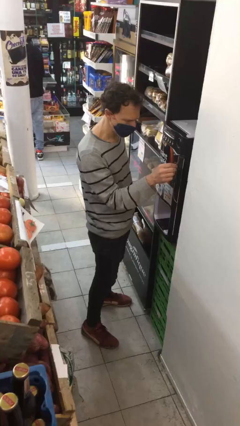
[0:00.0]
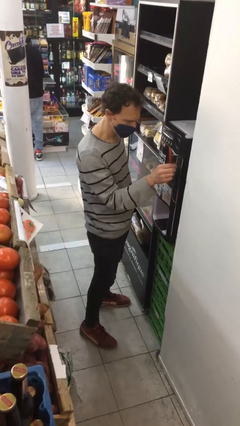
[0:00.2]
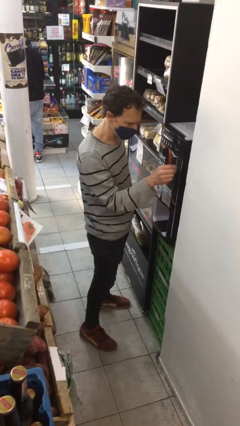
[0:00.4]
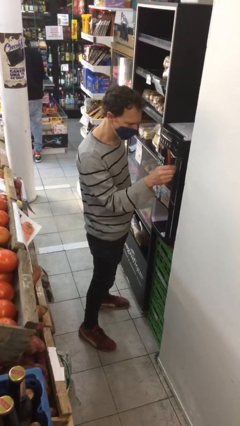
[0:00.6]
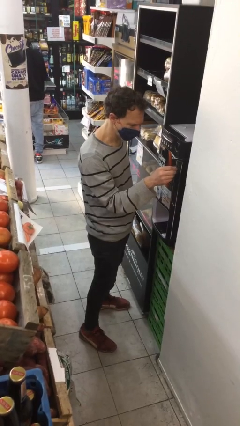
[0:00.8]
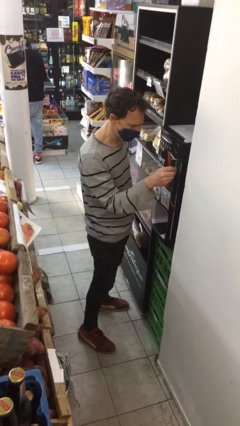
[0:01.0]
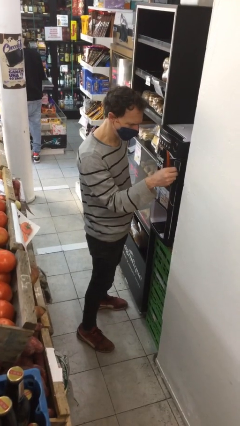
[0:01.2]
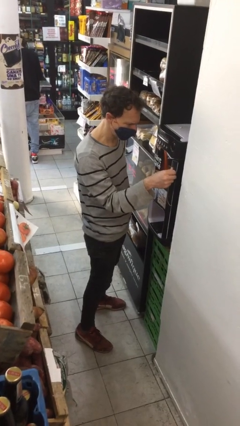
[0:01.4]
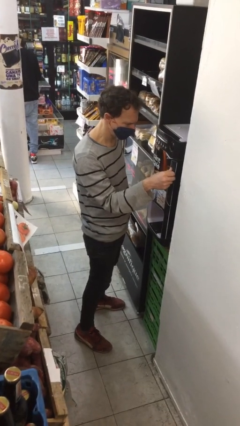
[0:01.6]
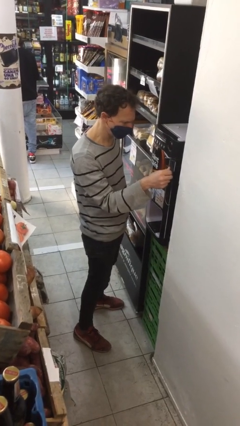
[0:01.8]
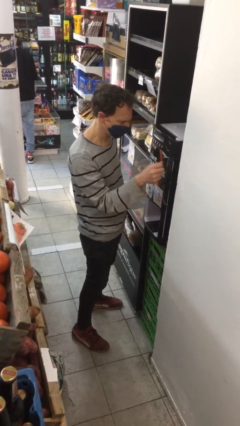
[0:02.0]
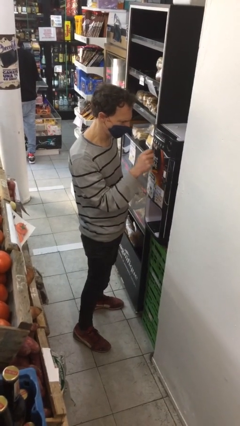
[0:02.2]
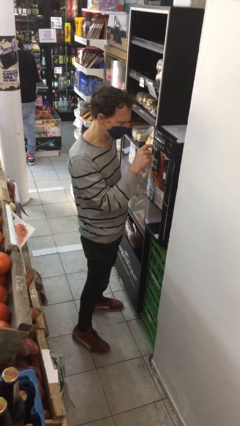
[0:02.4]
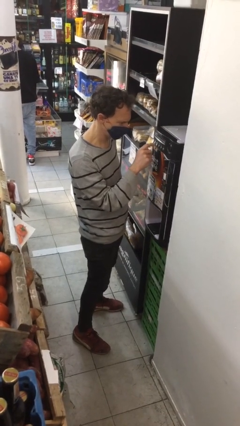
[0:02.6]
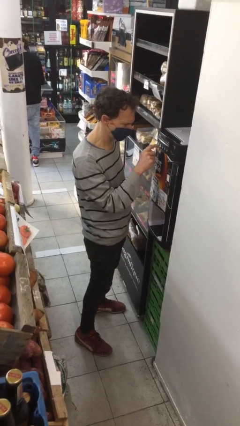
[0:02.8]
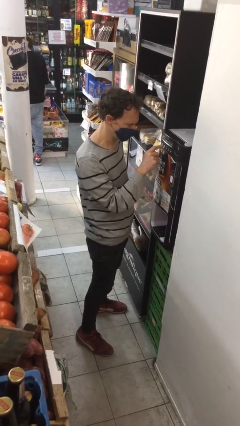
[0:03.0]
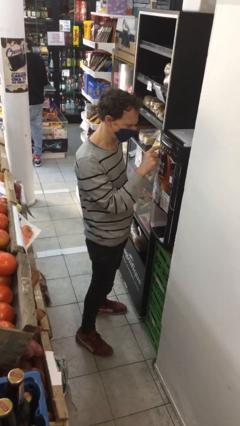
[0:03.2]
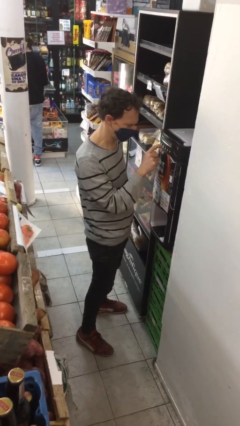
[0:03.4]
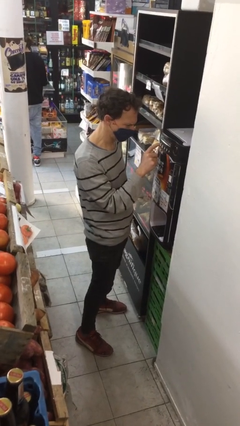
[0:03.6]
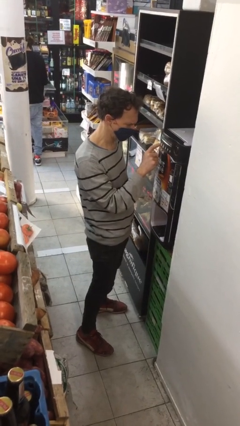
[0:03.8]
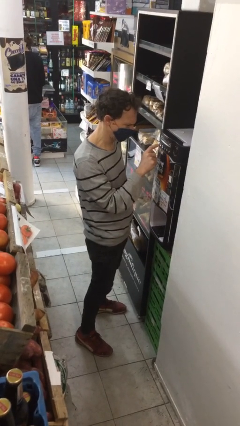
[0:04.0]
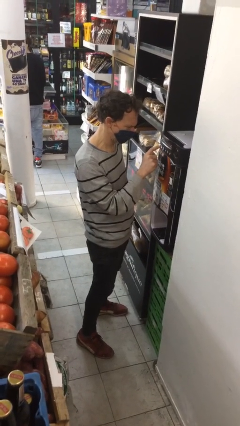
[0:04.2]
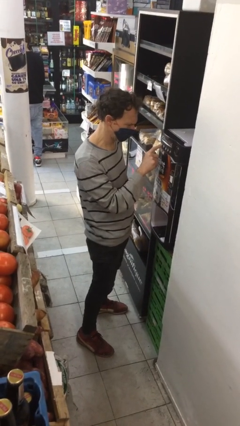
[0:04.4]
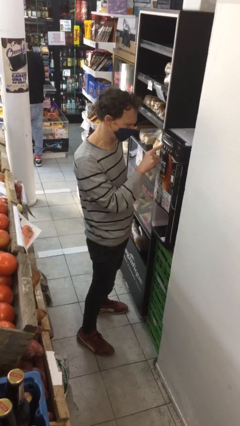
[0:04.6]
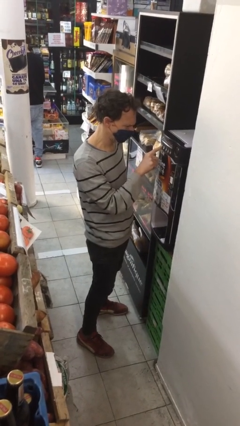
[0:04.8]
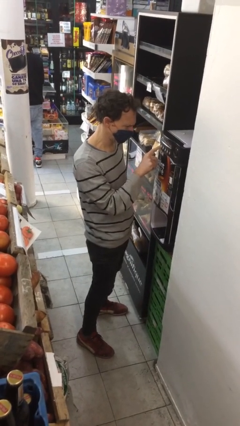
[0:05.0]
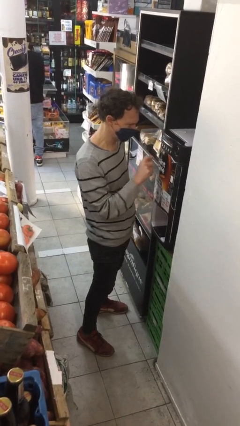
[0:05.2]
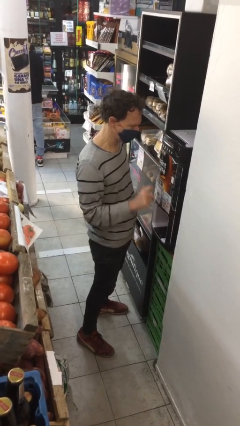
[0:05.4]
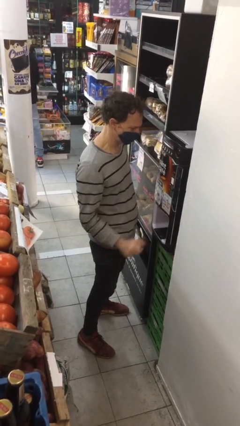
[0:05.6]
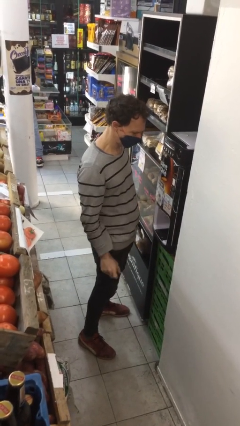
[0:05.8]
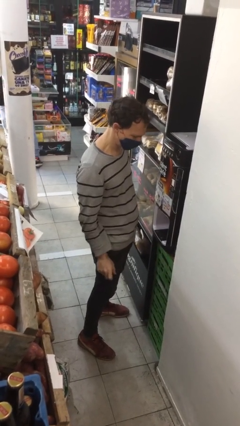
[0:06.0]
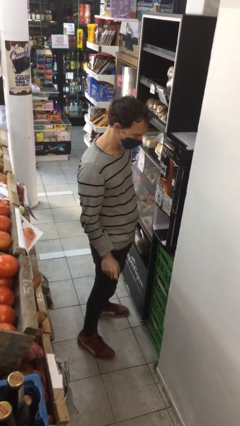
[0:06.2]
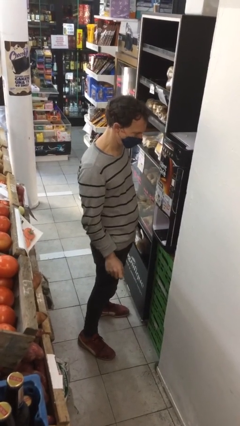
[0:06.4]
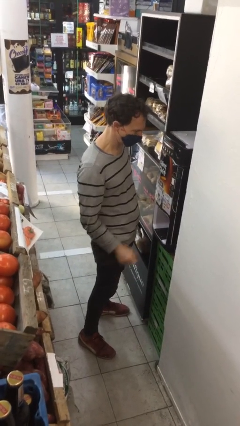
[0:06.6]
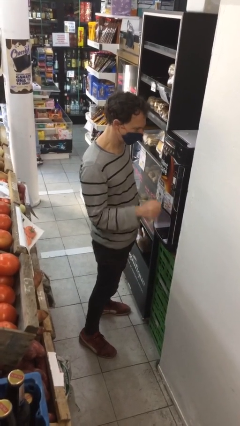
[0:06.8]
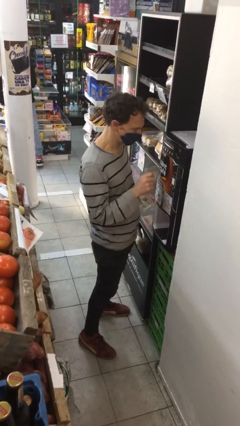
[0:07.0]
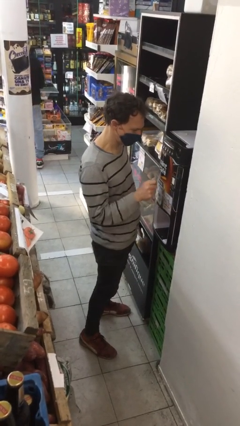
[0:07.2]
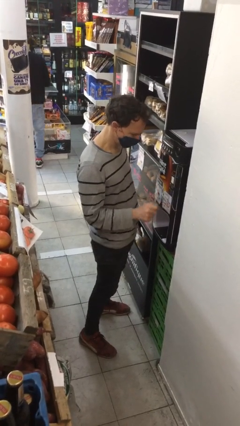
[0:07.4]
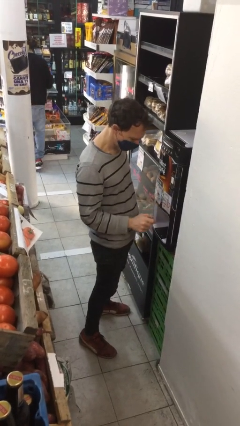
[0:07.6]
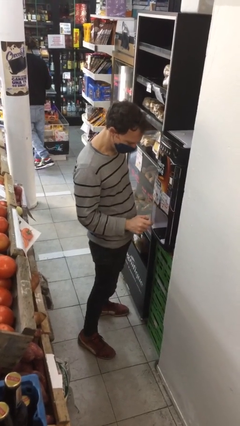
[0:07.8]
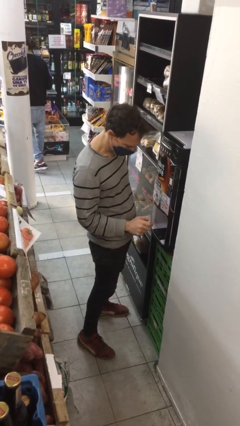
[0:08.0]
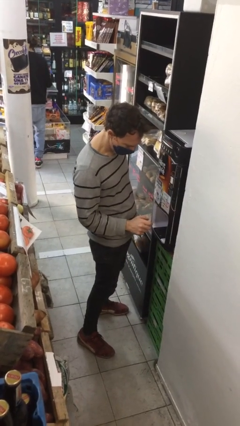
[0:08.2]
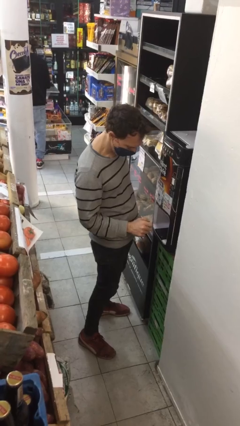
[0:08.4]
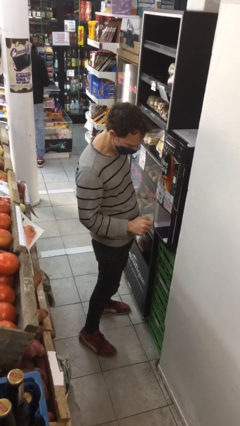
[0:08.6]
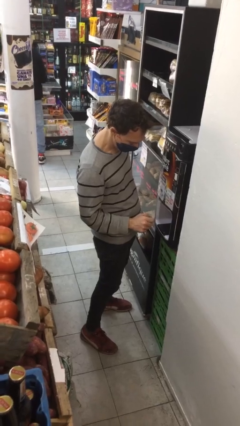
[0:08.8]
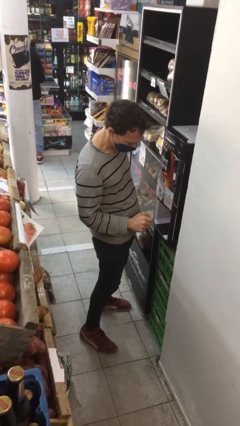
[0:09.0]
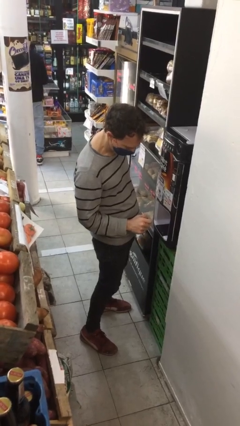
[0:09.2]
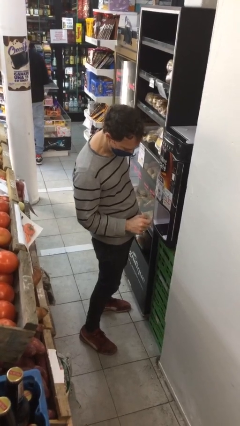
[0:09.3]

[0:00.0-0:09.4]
person purchases from machine

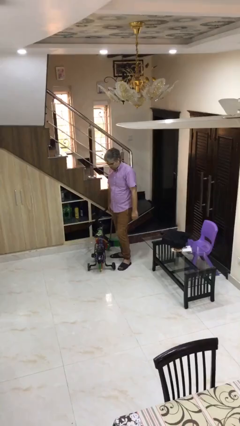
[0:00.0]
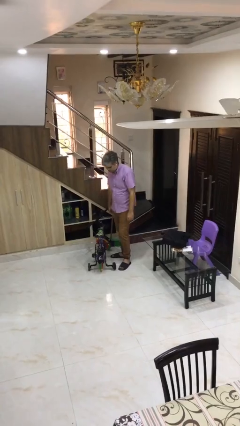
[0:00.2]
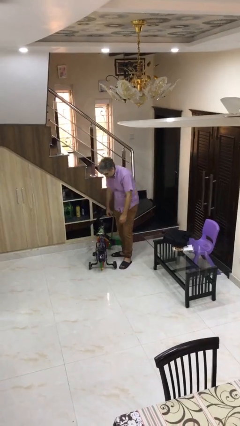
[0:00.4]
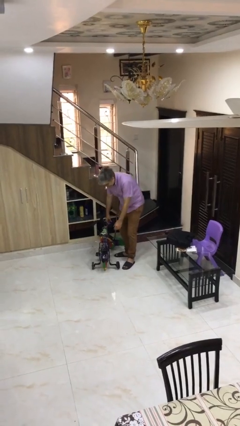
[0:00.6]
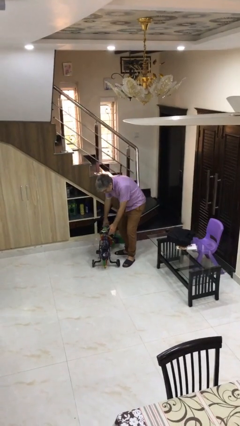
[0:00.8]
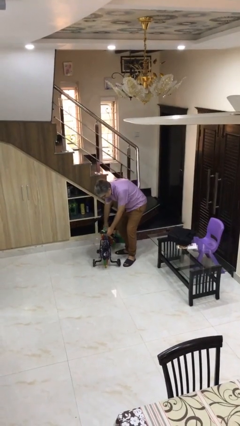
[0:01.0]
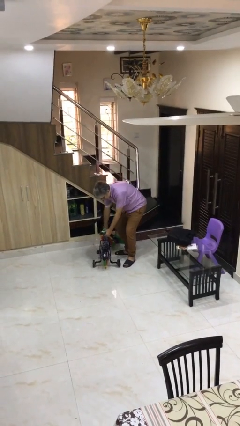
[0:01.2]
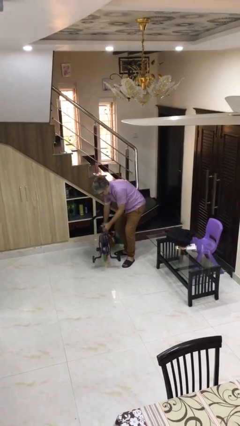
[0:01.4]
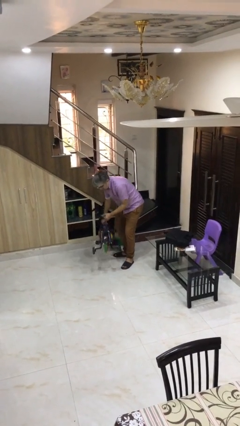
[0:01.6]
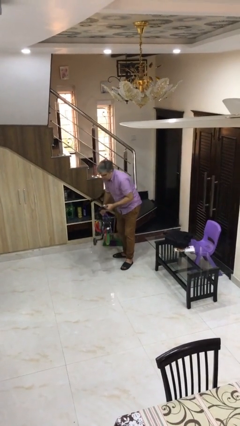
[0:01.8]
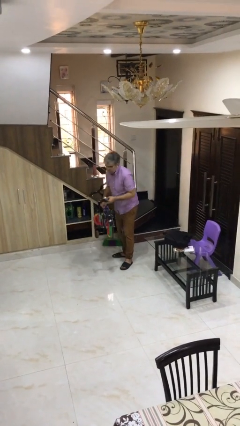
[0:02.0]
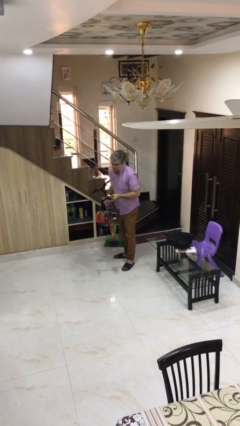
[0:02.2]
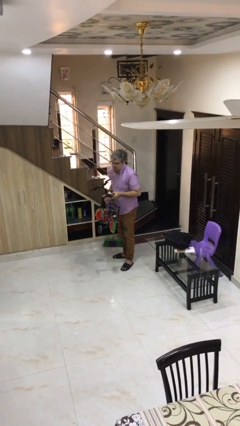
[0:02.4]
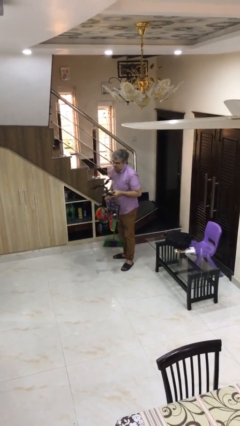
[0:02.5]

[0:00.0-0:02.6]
person picks up object from floor

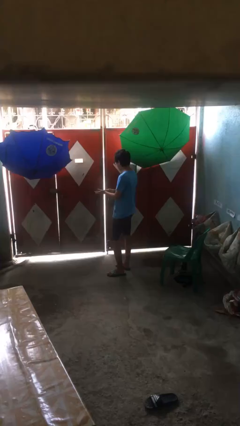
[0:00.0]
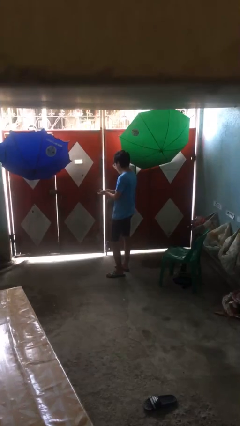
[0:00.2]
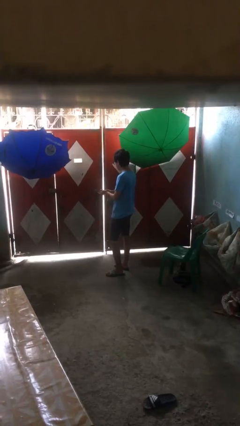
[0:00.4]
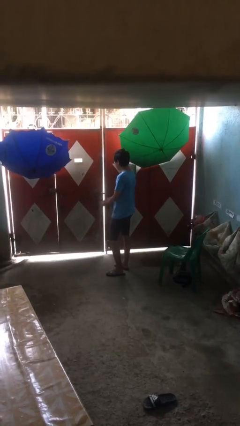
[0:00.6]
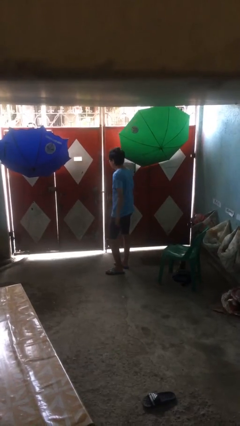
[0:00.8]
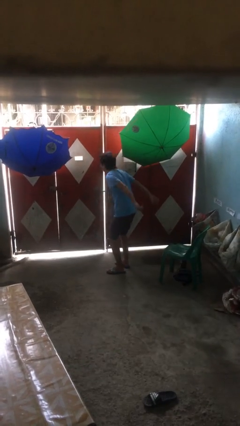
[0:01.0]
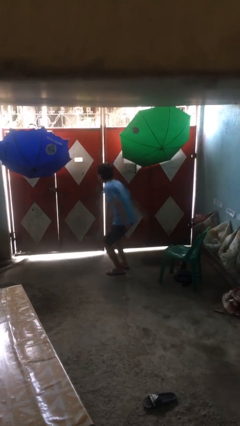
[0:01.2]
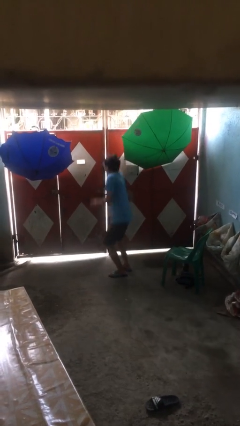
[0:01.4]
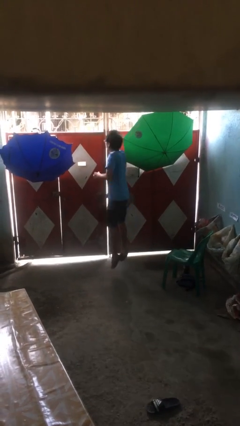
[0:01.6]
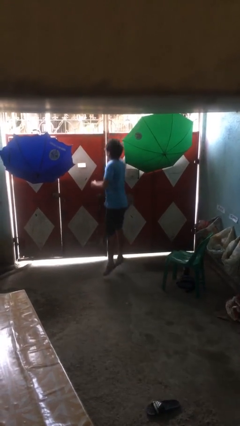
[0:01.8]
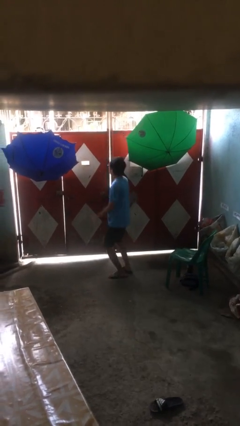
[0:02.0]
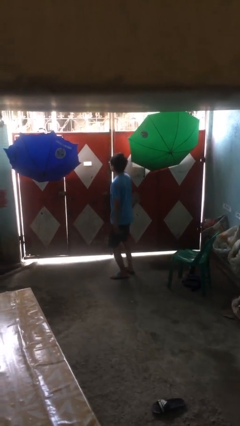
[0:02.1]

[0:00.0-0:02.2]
person jumps

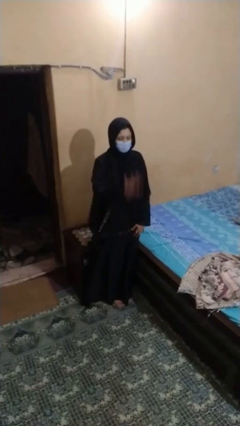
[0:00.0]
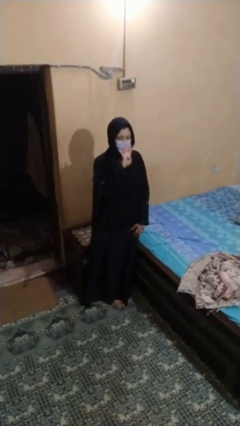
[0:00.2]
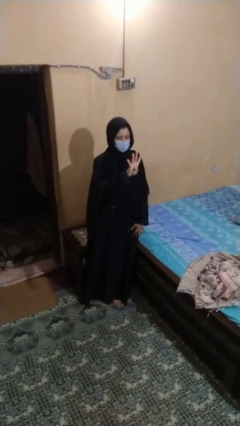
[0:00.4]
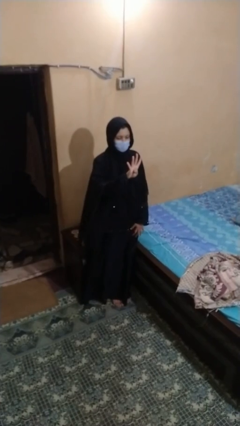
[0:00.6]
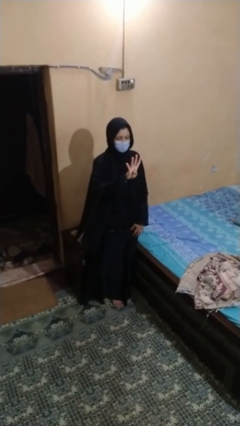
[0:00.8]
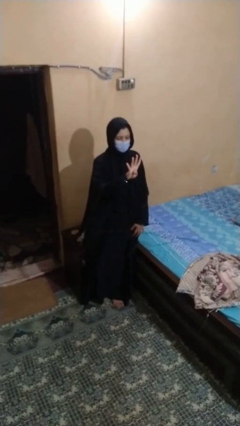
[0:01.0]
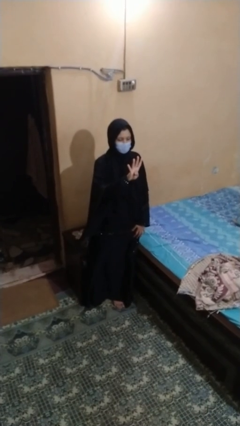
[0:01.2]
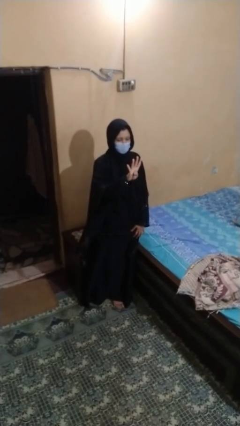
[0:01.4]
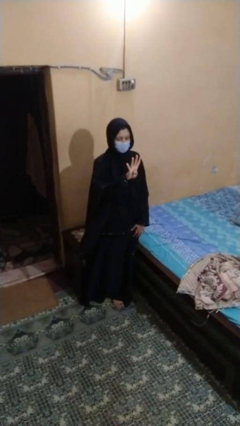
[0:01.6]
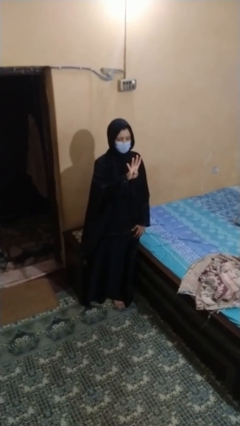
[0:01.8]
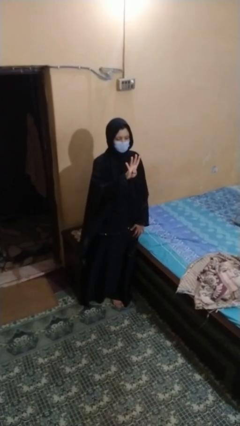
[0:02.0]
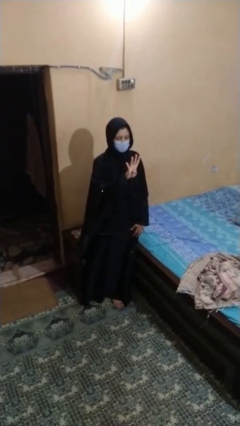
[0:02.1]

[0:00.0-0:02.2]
person gestures number four

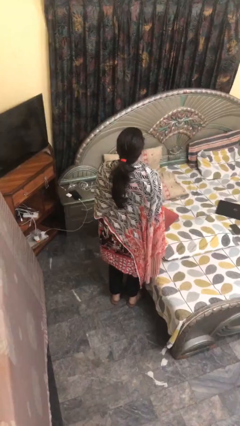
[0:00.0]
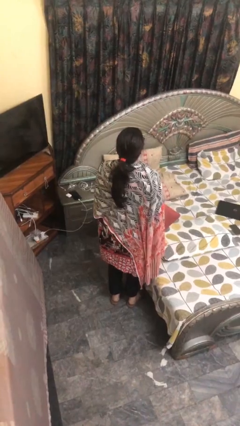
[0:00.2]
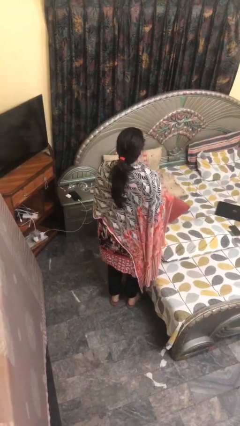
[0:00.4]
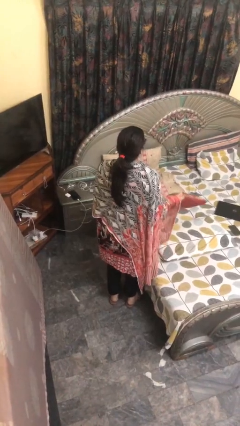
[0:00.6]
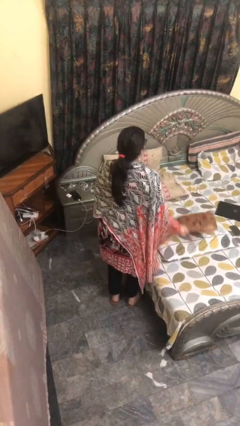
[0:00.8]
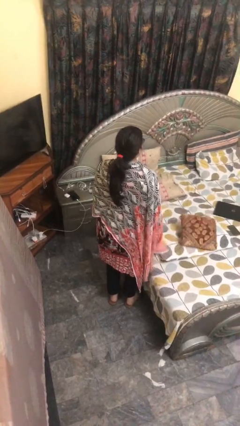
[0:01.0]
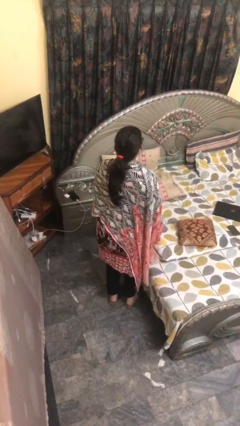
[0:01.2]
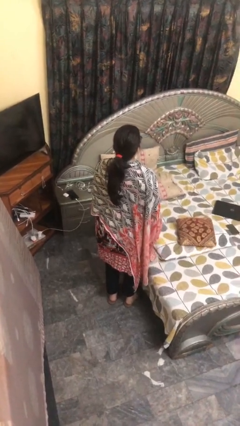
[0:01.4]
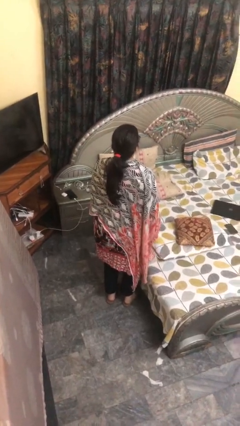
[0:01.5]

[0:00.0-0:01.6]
person throws object on bed
